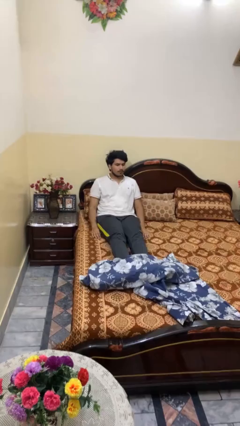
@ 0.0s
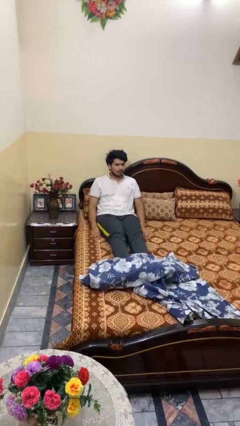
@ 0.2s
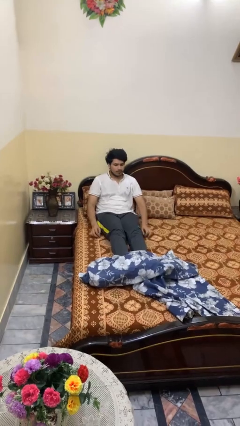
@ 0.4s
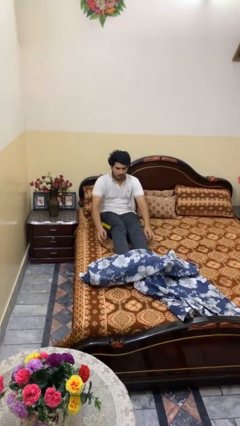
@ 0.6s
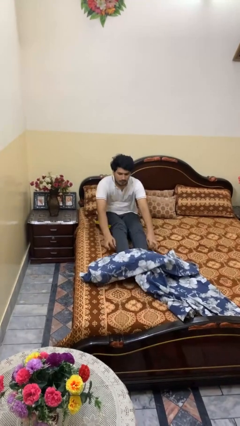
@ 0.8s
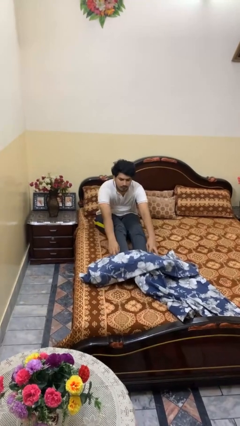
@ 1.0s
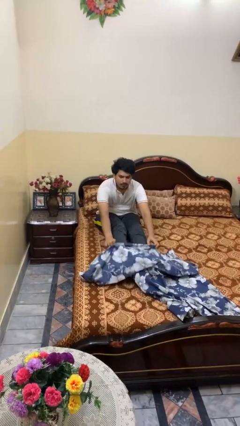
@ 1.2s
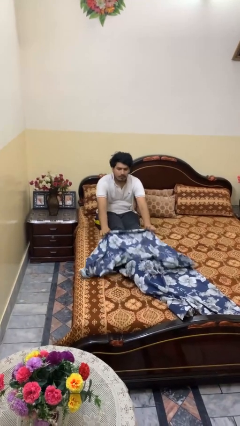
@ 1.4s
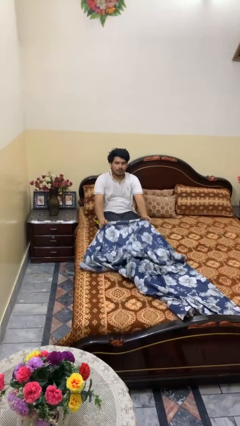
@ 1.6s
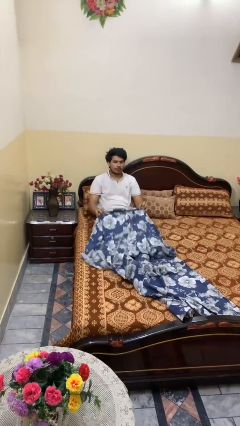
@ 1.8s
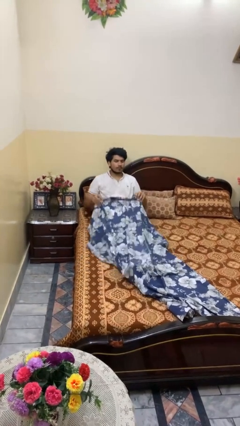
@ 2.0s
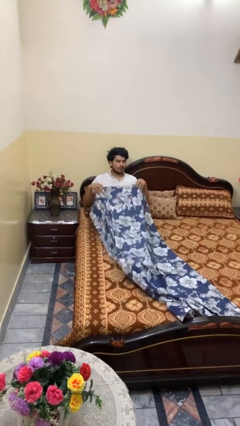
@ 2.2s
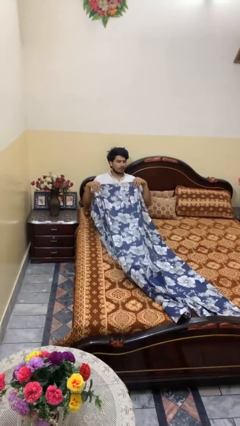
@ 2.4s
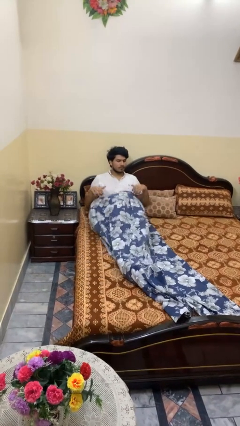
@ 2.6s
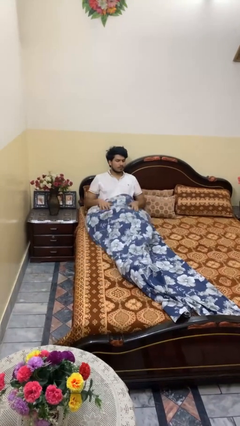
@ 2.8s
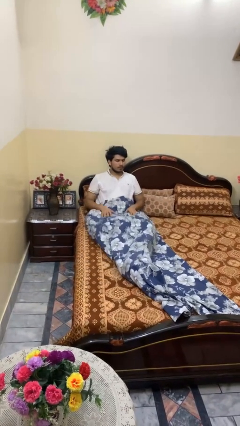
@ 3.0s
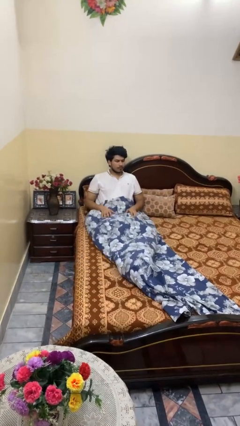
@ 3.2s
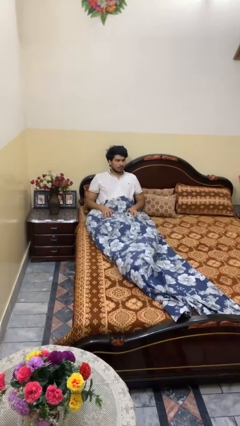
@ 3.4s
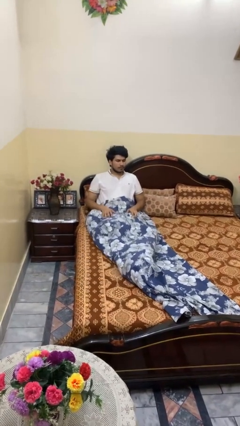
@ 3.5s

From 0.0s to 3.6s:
person covers with bedsheets

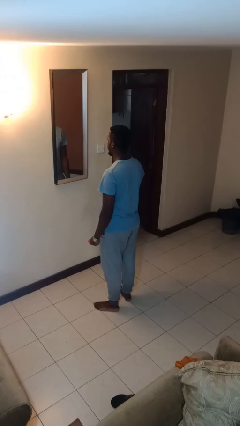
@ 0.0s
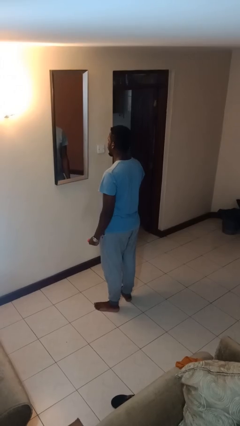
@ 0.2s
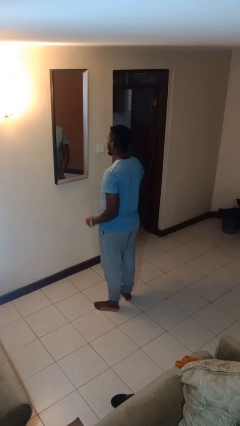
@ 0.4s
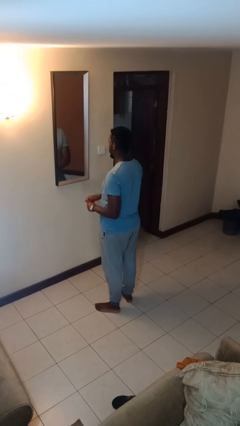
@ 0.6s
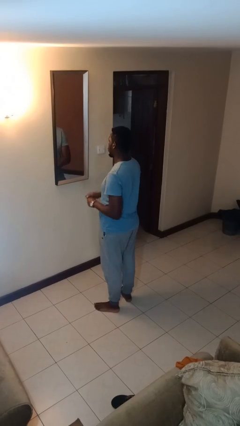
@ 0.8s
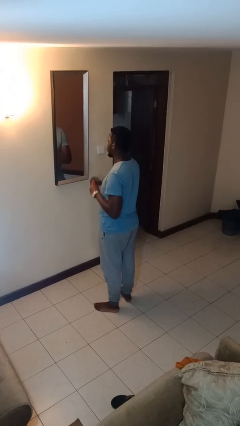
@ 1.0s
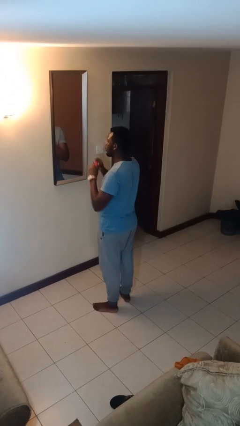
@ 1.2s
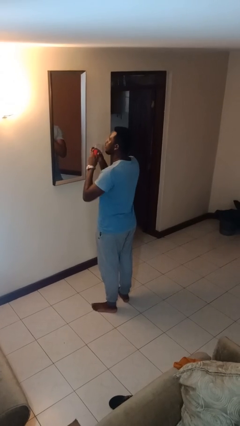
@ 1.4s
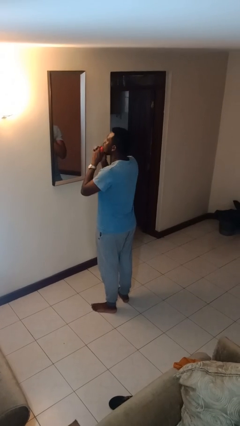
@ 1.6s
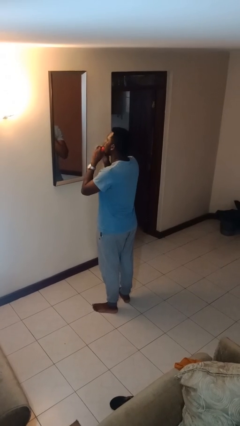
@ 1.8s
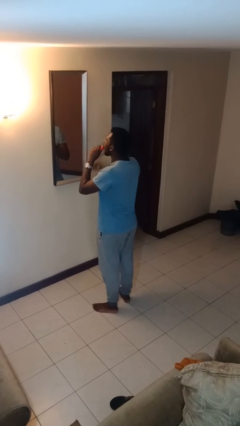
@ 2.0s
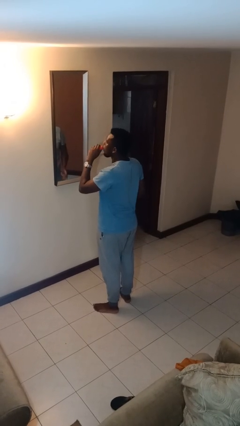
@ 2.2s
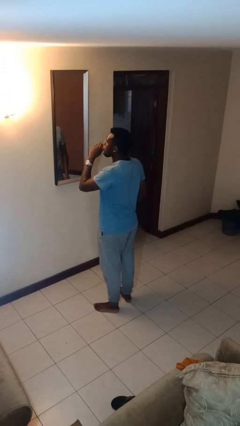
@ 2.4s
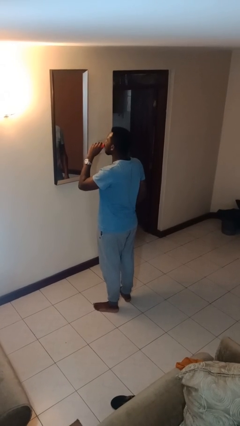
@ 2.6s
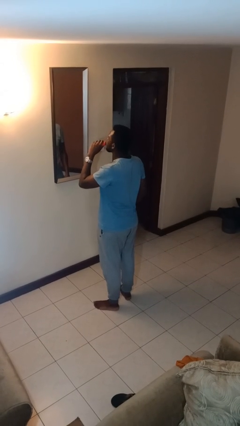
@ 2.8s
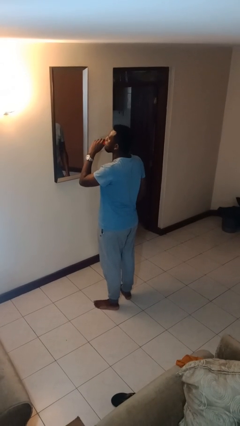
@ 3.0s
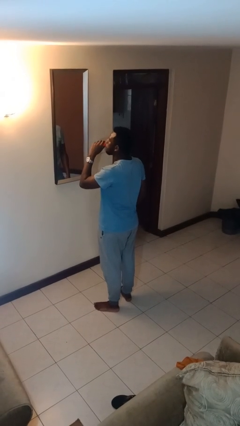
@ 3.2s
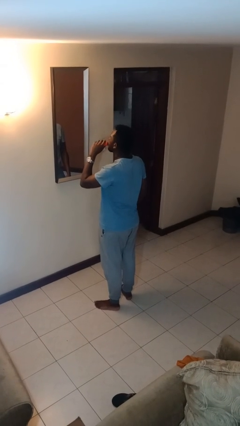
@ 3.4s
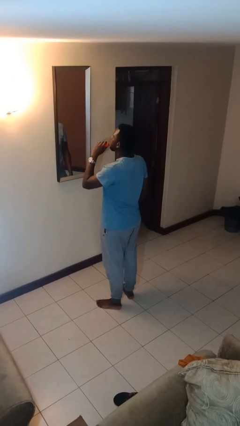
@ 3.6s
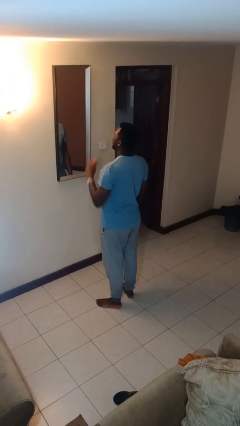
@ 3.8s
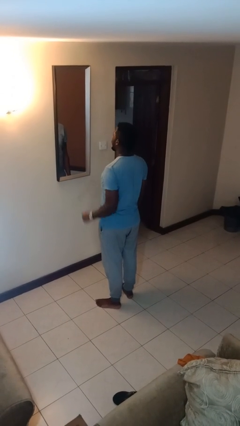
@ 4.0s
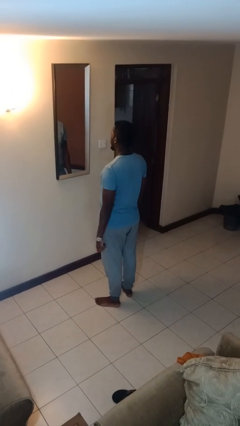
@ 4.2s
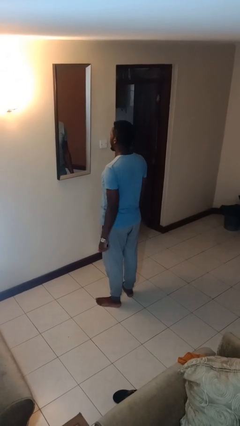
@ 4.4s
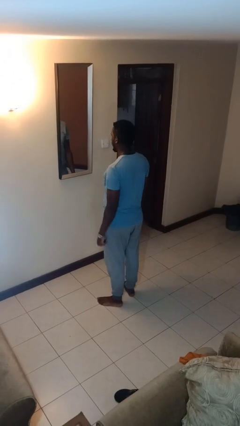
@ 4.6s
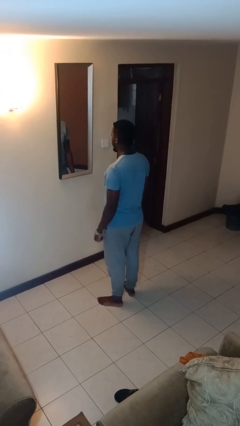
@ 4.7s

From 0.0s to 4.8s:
person applies lip makeup

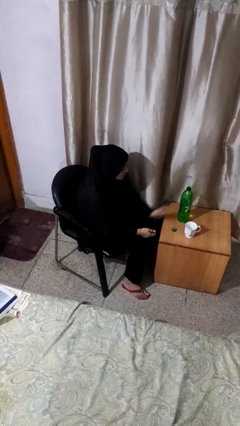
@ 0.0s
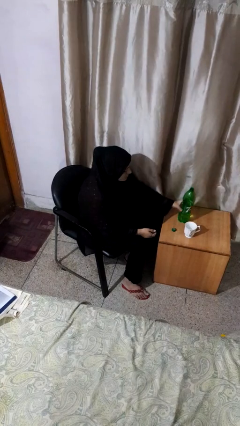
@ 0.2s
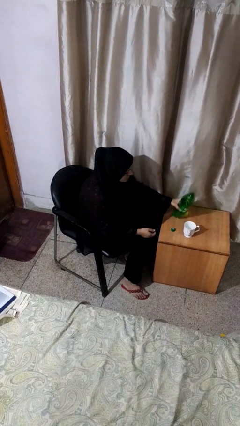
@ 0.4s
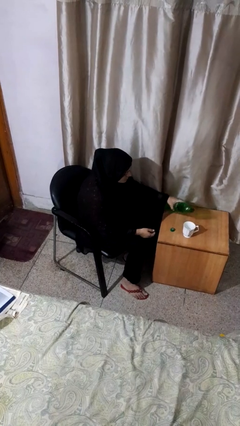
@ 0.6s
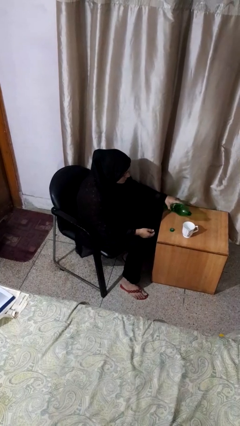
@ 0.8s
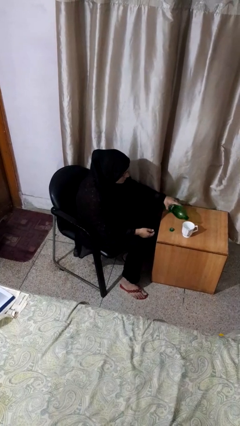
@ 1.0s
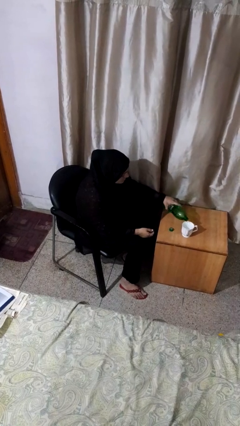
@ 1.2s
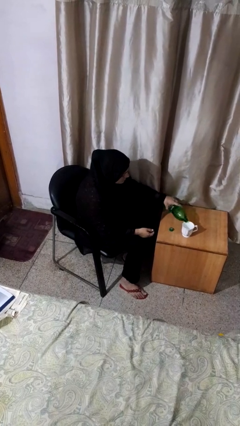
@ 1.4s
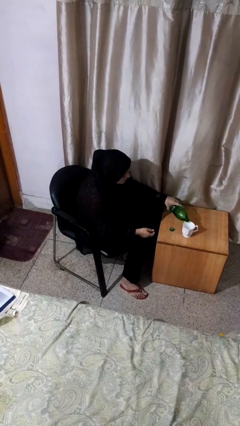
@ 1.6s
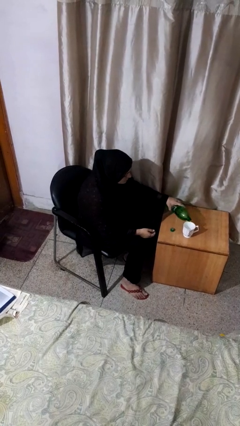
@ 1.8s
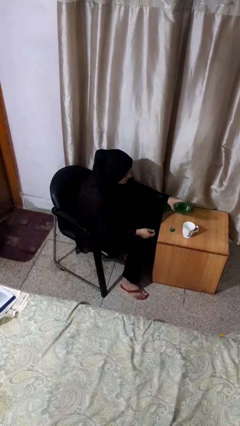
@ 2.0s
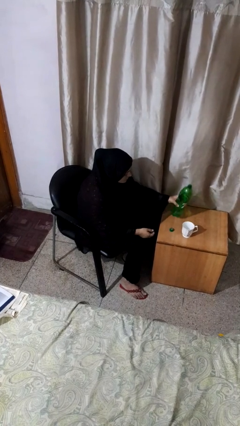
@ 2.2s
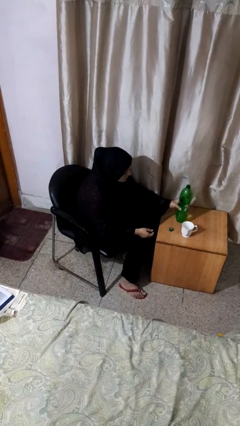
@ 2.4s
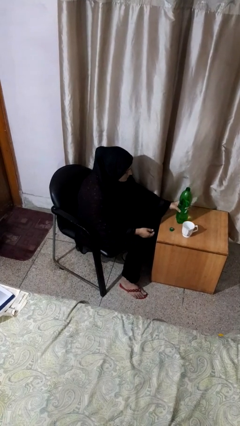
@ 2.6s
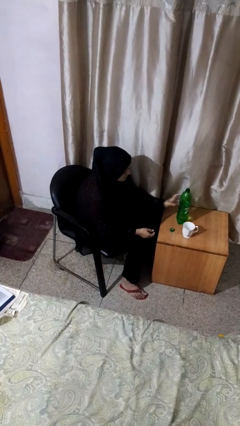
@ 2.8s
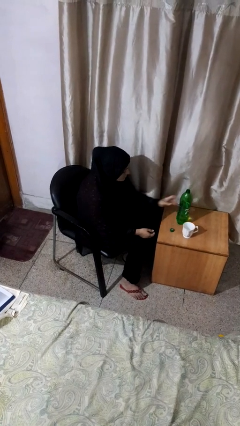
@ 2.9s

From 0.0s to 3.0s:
person pours liquid into cup

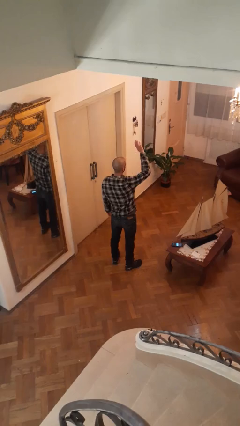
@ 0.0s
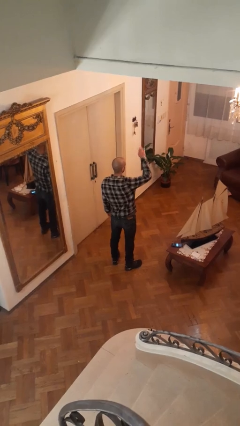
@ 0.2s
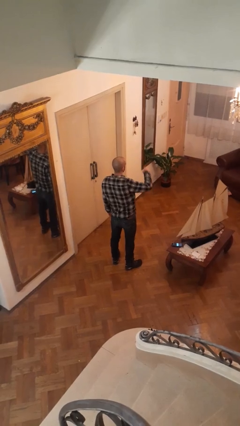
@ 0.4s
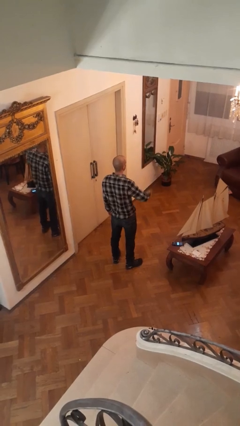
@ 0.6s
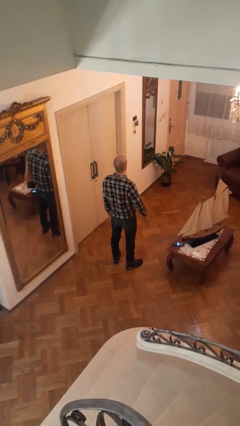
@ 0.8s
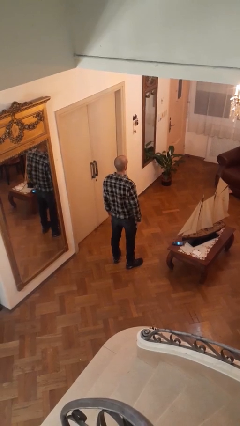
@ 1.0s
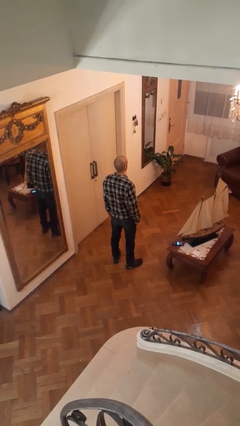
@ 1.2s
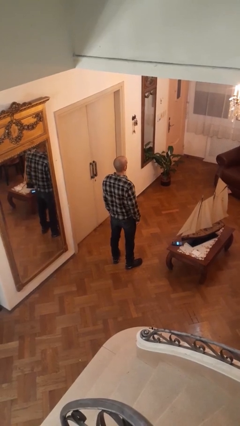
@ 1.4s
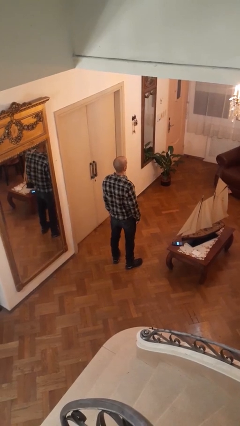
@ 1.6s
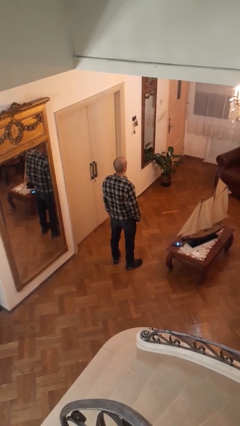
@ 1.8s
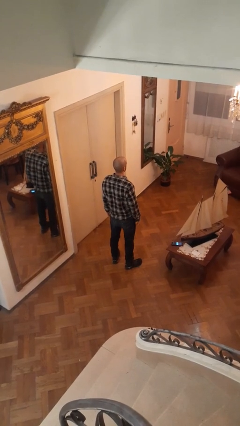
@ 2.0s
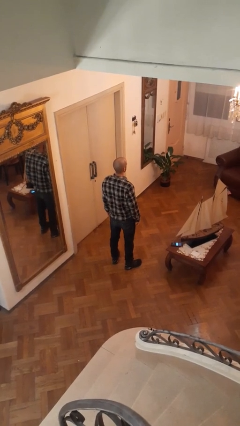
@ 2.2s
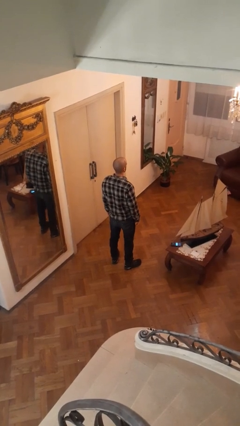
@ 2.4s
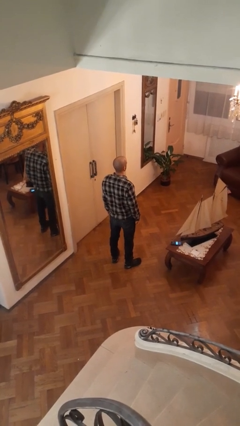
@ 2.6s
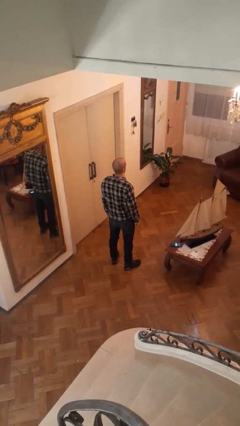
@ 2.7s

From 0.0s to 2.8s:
person gestures lower hand

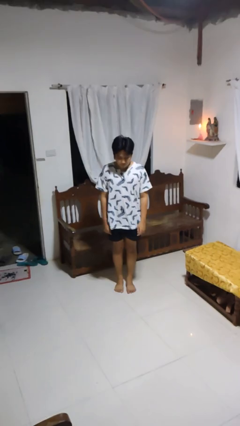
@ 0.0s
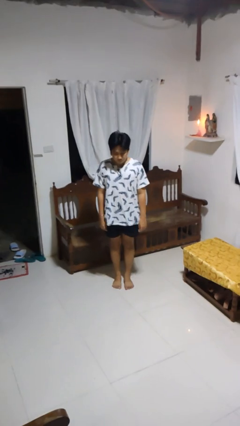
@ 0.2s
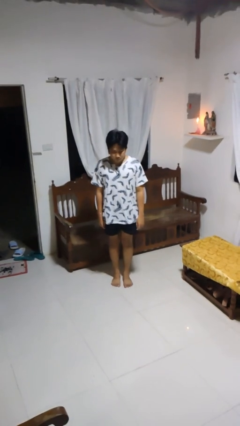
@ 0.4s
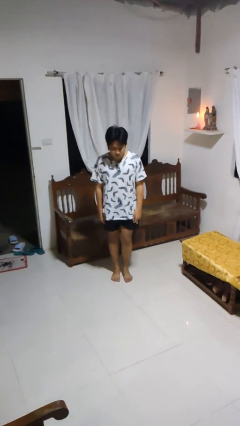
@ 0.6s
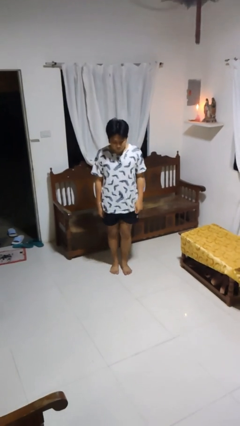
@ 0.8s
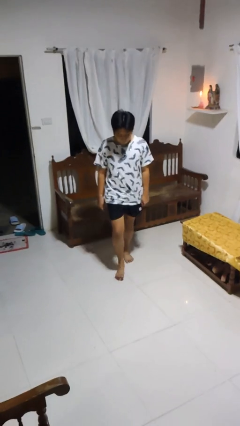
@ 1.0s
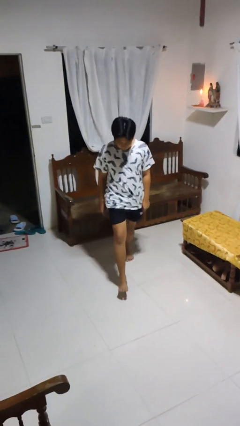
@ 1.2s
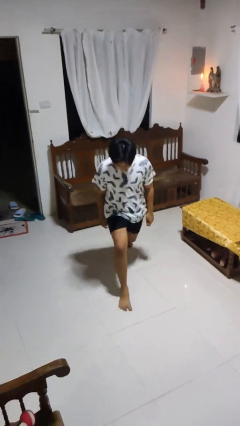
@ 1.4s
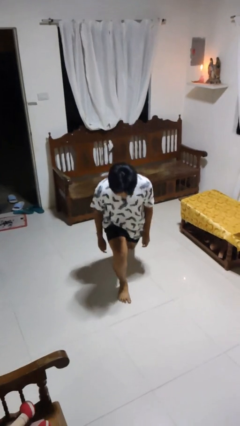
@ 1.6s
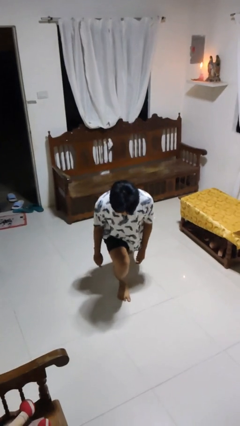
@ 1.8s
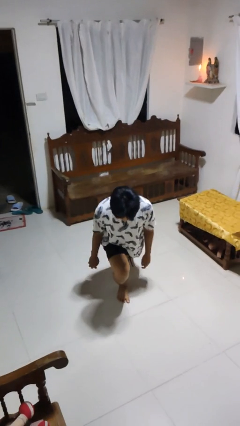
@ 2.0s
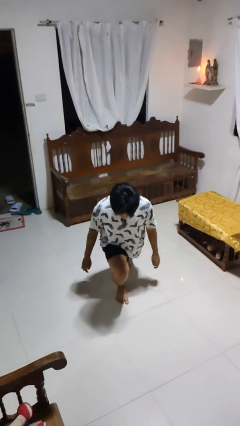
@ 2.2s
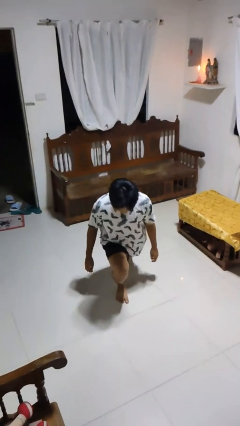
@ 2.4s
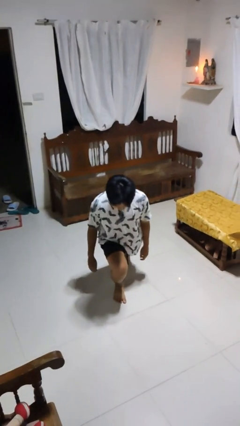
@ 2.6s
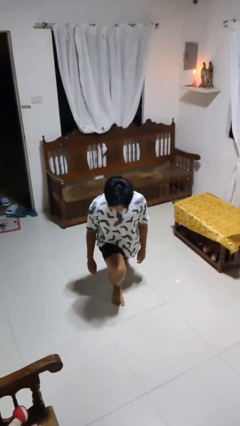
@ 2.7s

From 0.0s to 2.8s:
person exercises with lunges

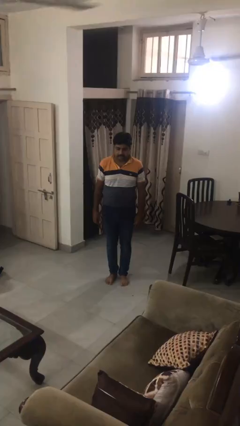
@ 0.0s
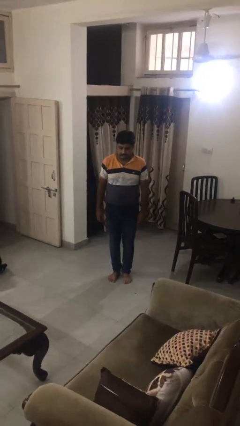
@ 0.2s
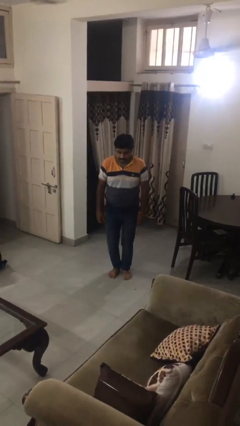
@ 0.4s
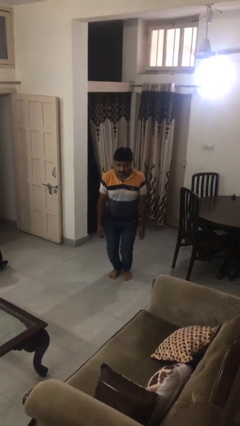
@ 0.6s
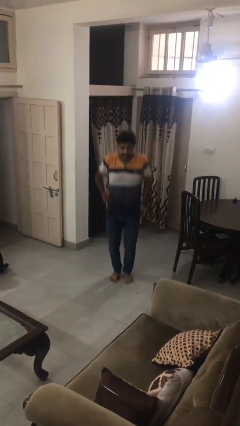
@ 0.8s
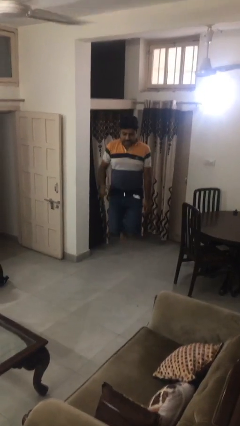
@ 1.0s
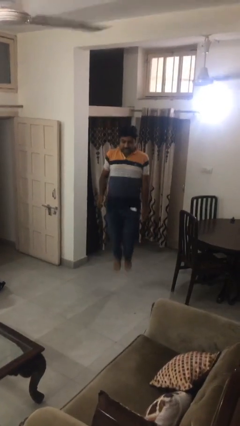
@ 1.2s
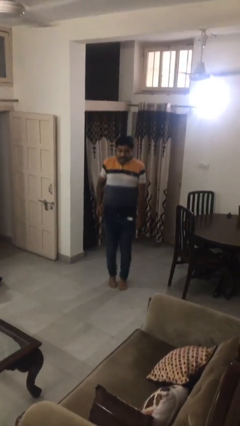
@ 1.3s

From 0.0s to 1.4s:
person jumps
